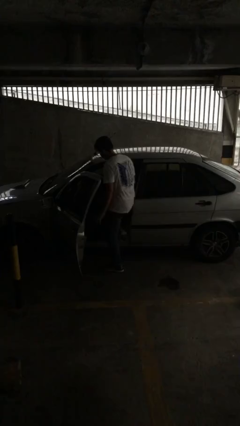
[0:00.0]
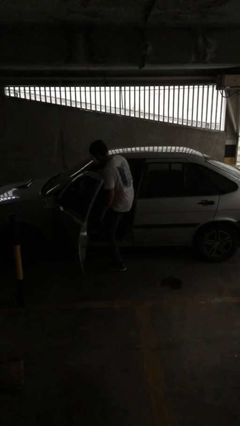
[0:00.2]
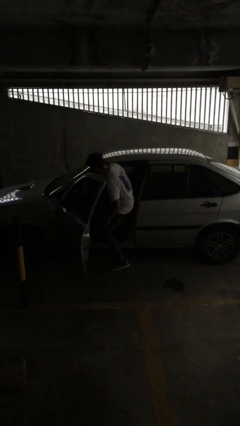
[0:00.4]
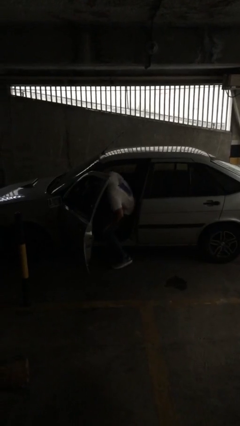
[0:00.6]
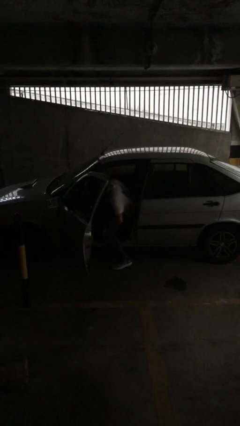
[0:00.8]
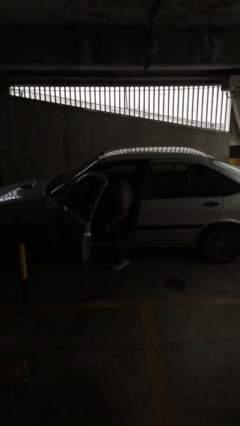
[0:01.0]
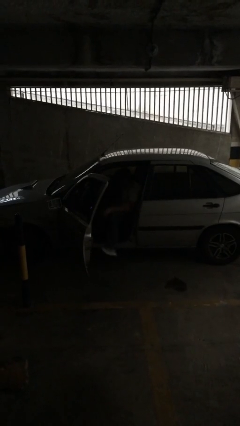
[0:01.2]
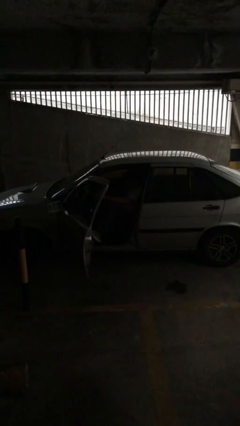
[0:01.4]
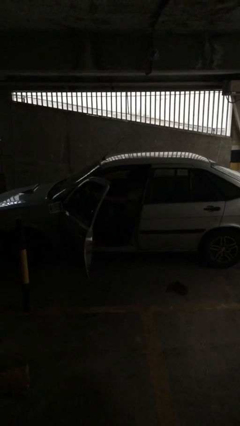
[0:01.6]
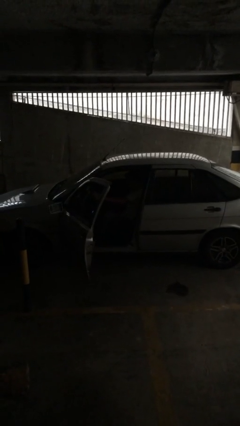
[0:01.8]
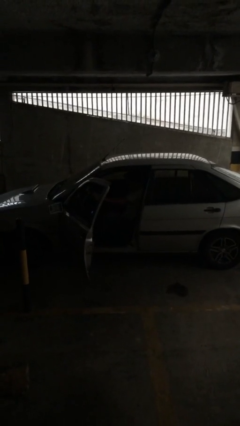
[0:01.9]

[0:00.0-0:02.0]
person enters car

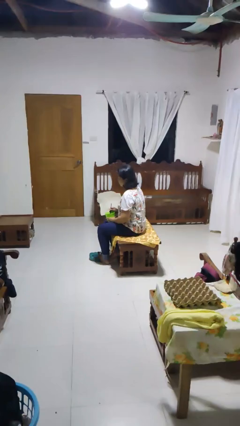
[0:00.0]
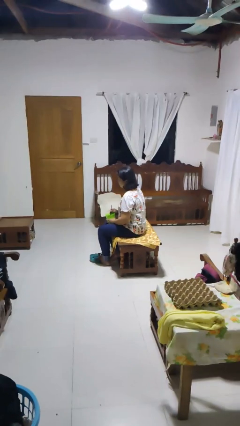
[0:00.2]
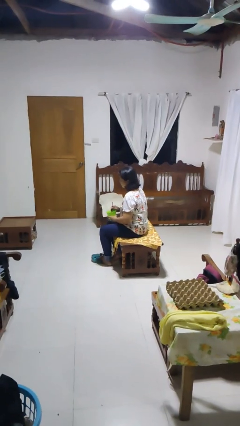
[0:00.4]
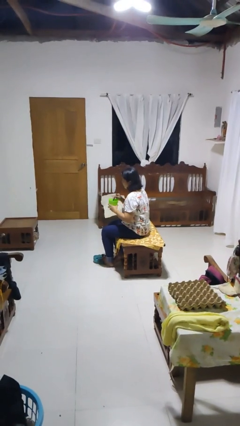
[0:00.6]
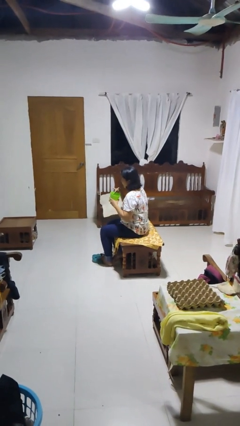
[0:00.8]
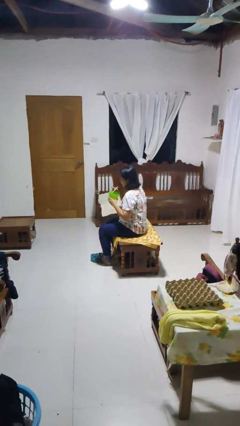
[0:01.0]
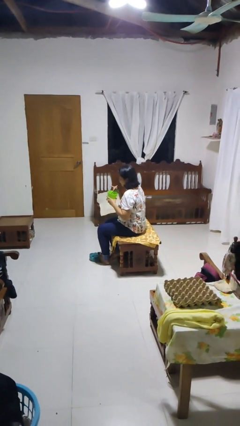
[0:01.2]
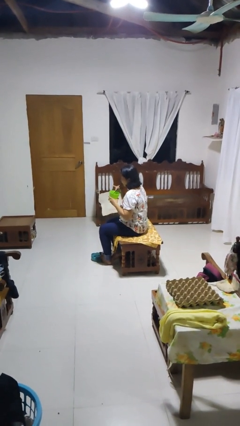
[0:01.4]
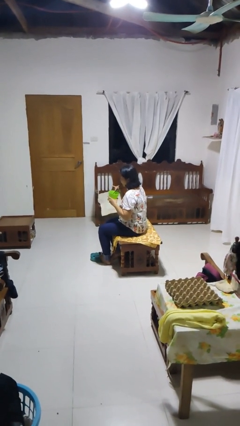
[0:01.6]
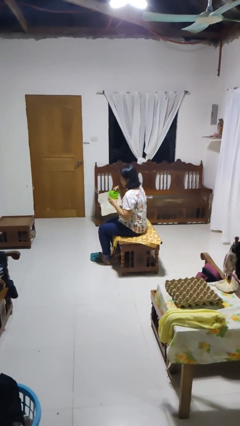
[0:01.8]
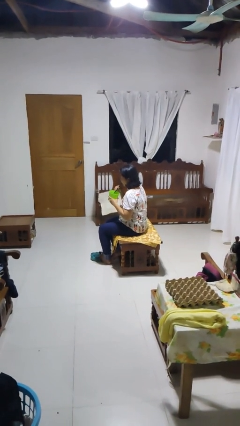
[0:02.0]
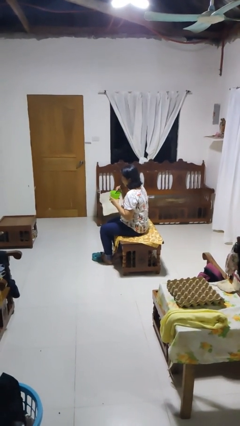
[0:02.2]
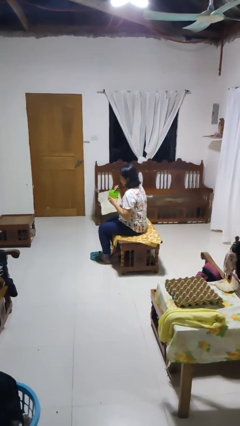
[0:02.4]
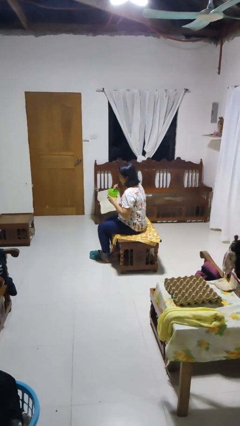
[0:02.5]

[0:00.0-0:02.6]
person drinks from straw

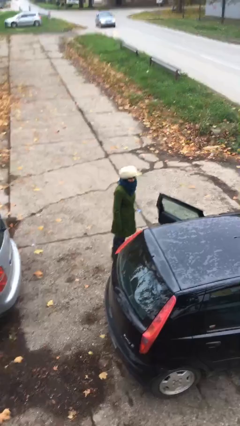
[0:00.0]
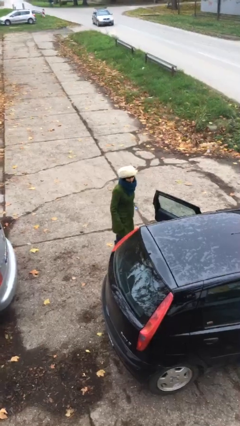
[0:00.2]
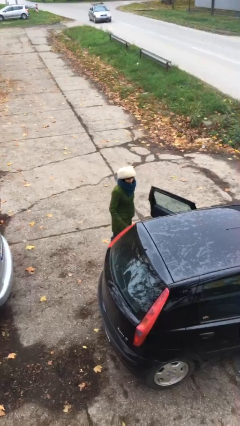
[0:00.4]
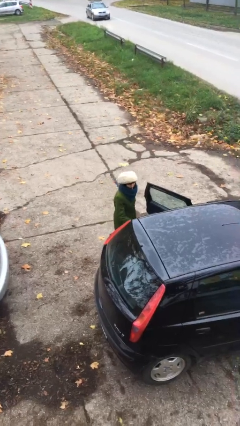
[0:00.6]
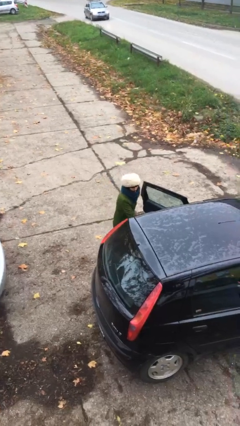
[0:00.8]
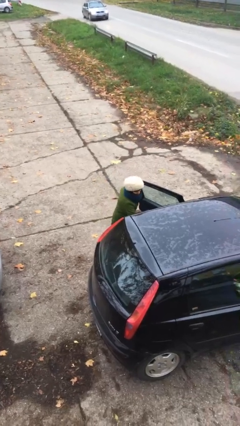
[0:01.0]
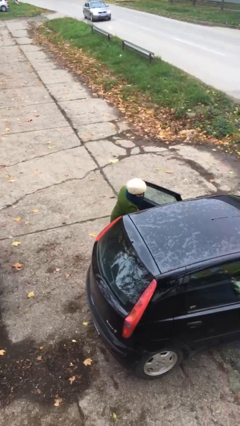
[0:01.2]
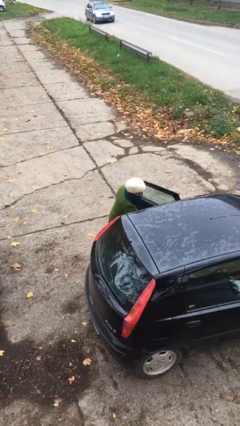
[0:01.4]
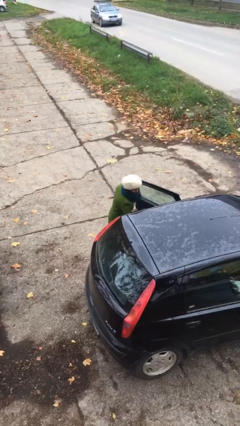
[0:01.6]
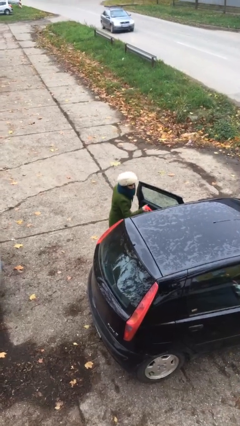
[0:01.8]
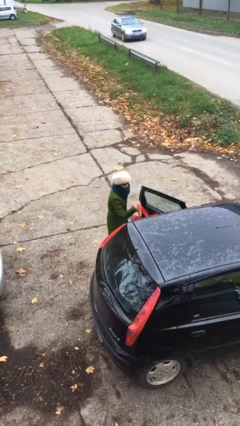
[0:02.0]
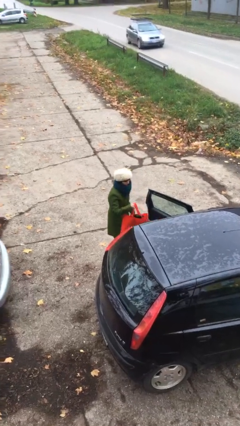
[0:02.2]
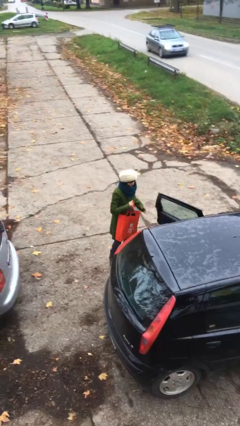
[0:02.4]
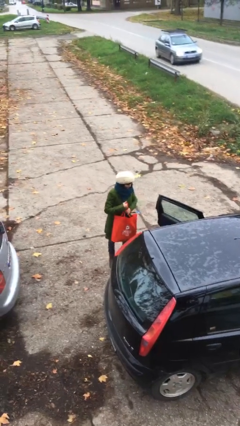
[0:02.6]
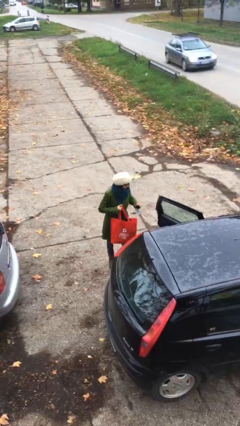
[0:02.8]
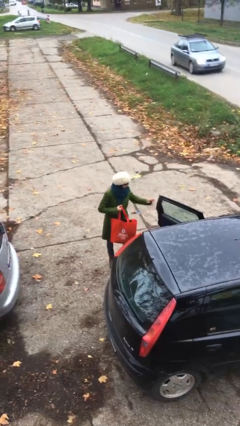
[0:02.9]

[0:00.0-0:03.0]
person unloads car

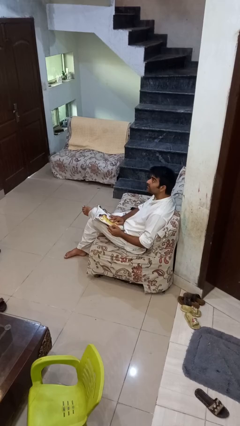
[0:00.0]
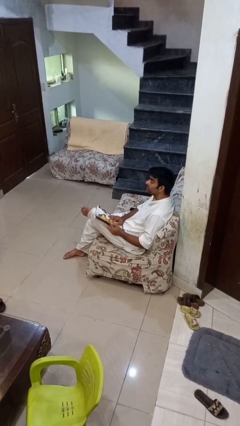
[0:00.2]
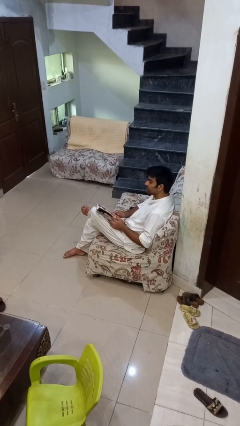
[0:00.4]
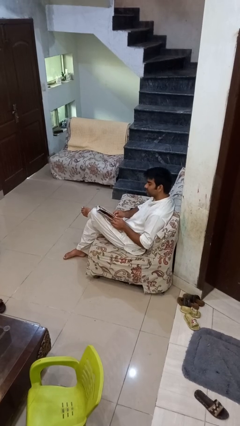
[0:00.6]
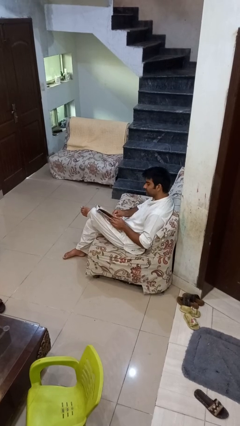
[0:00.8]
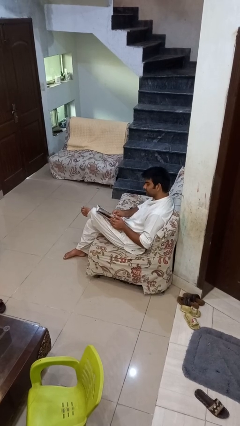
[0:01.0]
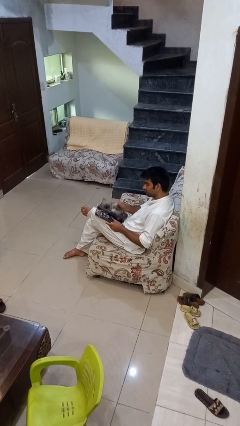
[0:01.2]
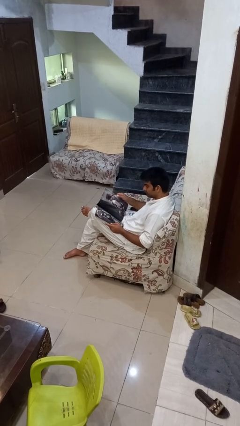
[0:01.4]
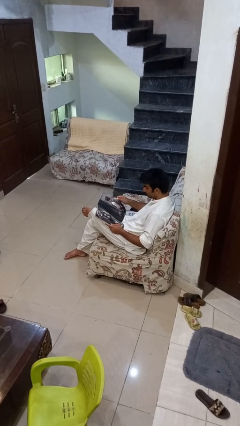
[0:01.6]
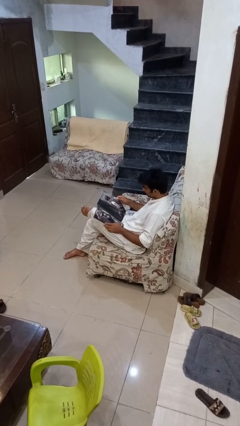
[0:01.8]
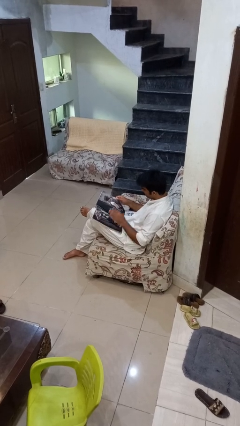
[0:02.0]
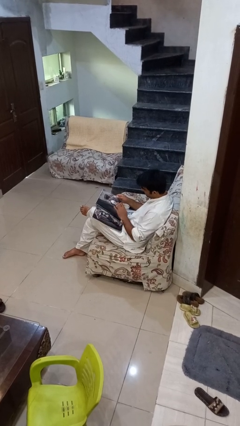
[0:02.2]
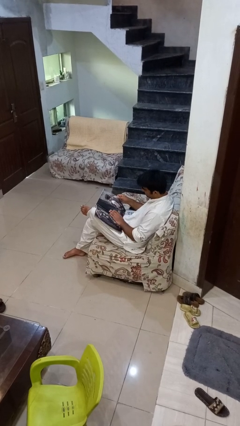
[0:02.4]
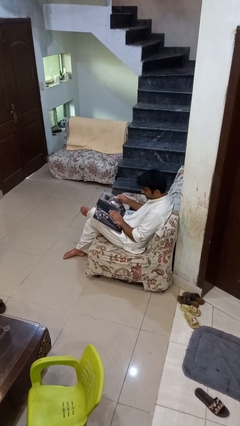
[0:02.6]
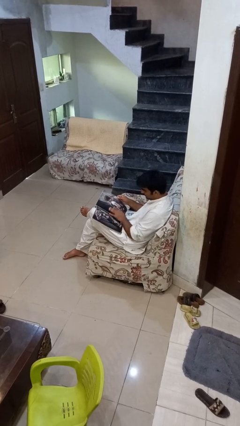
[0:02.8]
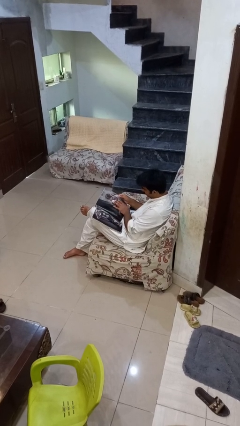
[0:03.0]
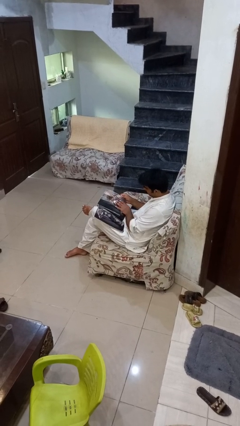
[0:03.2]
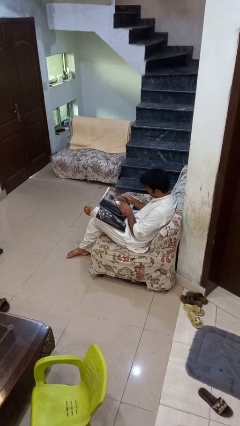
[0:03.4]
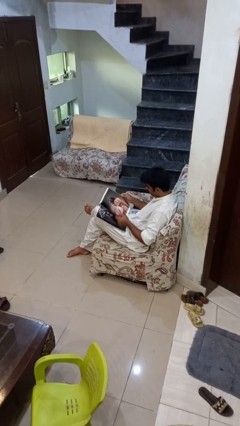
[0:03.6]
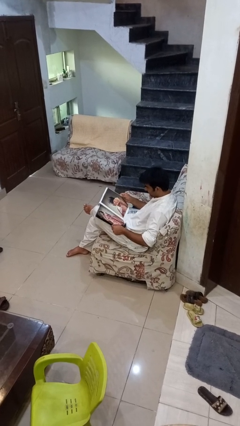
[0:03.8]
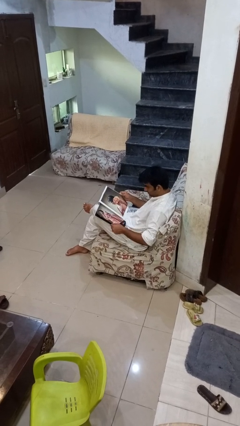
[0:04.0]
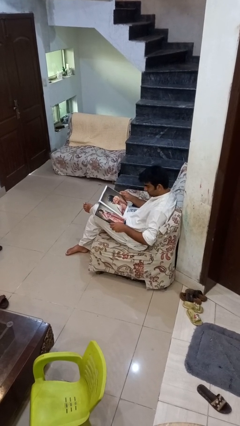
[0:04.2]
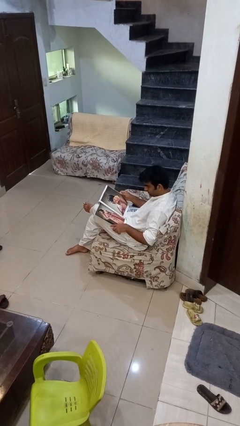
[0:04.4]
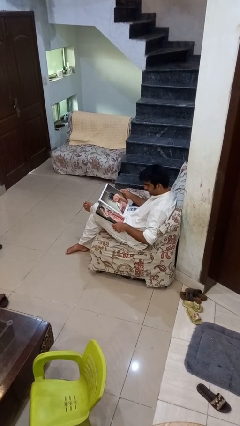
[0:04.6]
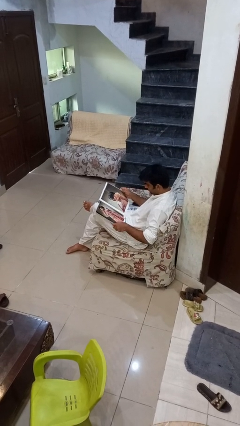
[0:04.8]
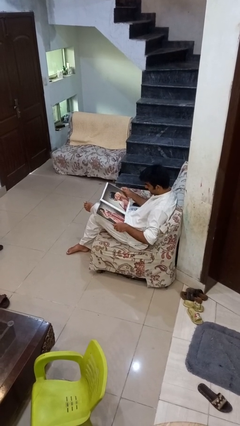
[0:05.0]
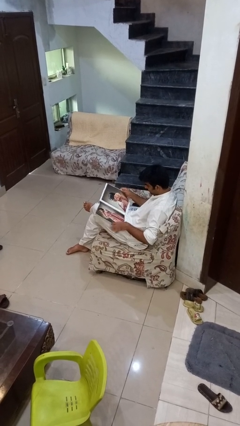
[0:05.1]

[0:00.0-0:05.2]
person reads magazine

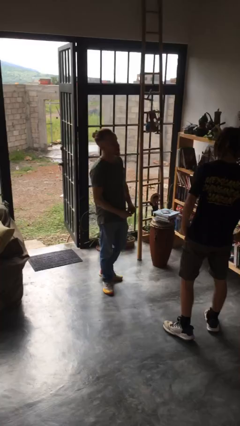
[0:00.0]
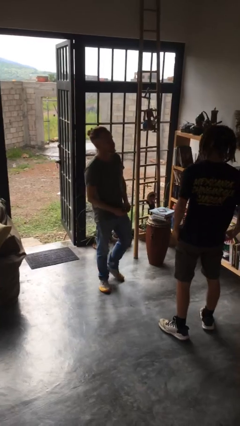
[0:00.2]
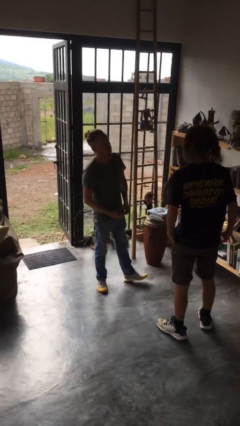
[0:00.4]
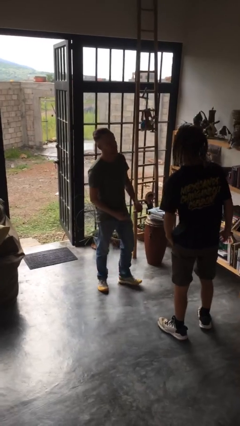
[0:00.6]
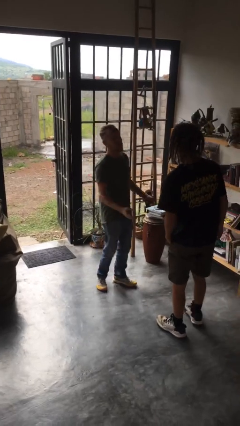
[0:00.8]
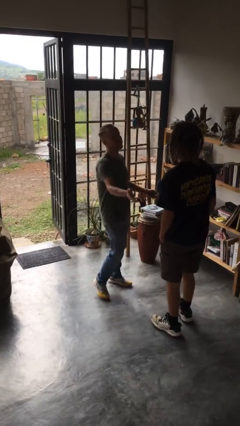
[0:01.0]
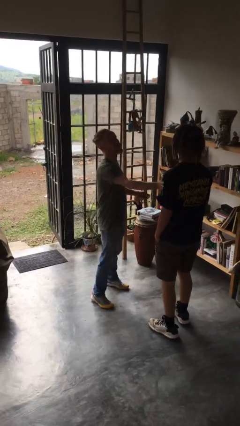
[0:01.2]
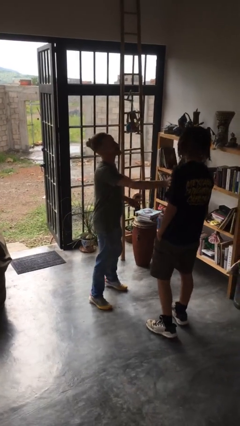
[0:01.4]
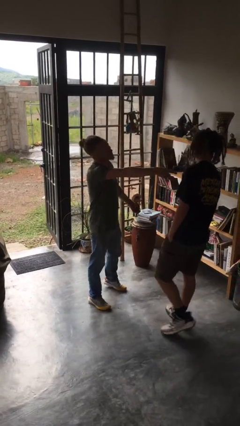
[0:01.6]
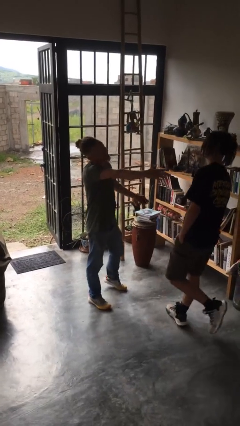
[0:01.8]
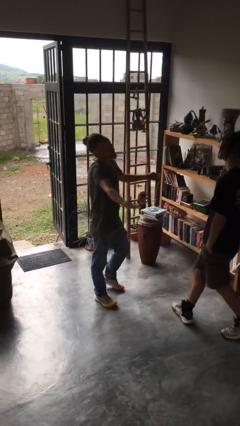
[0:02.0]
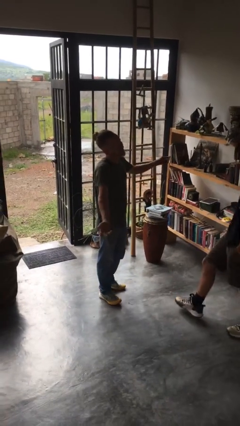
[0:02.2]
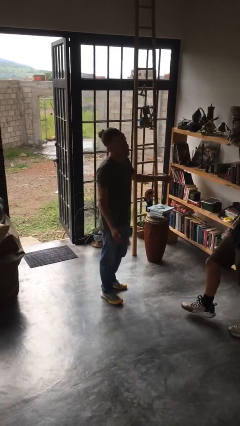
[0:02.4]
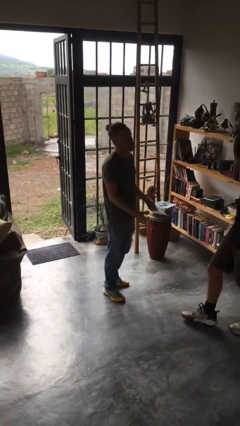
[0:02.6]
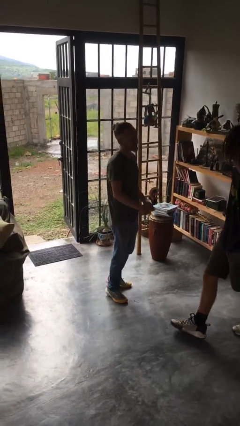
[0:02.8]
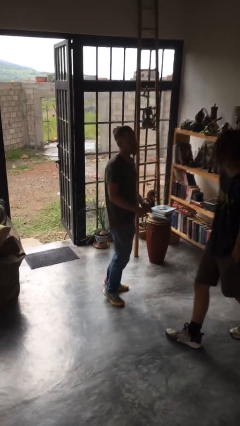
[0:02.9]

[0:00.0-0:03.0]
person shoves person

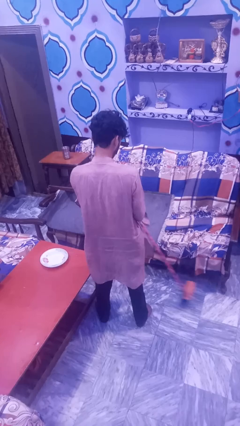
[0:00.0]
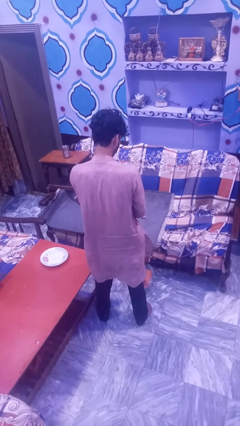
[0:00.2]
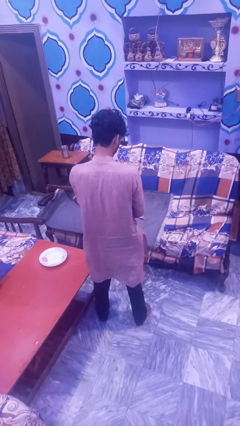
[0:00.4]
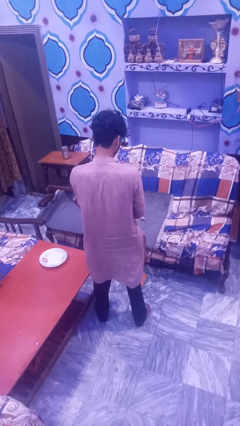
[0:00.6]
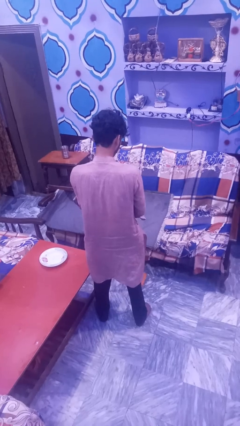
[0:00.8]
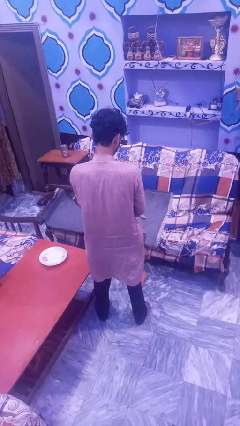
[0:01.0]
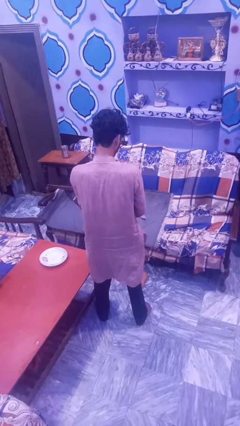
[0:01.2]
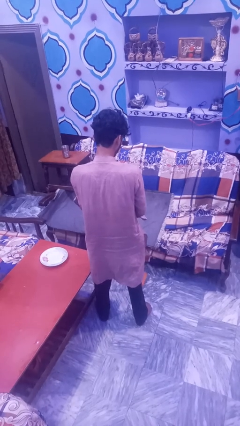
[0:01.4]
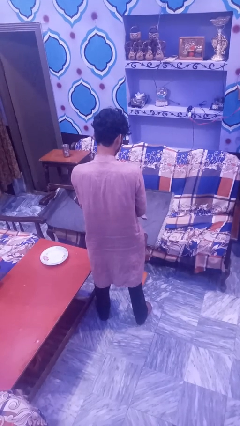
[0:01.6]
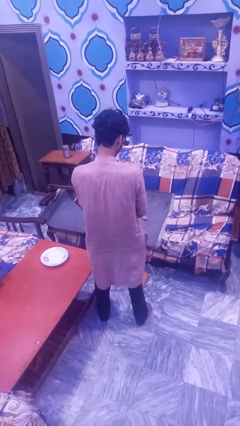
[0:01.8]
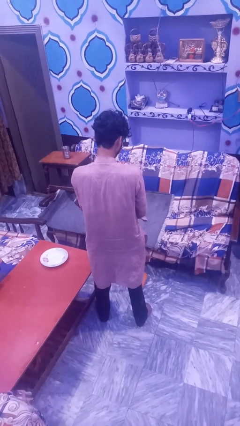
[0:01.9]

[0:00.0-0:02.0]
person mops
